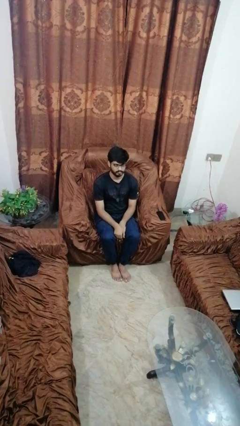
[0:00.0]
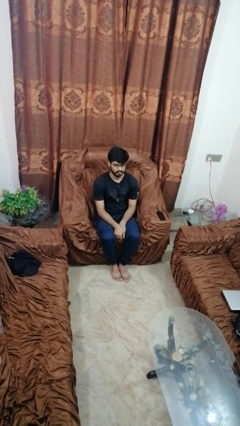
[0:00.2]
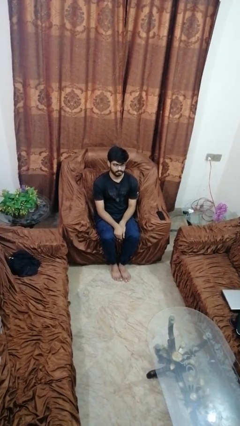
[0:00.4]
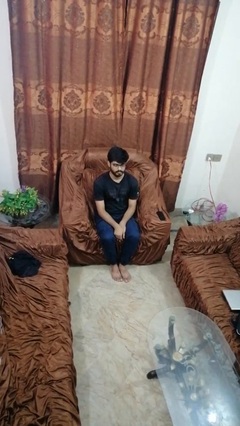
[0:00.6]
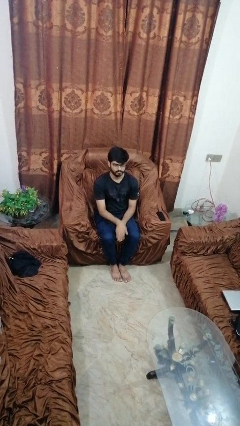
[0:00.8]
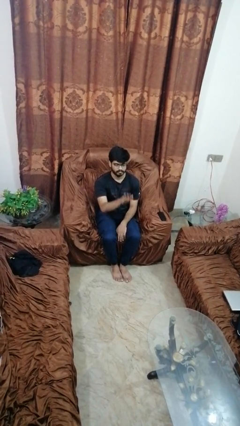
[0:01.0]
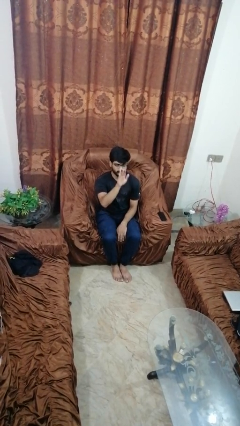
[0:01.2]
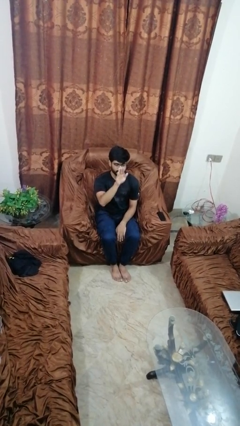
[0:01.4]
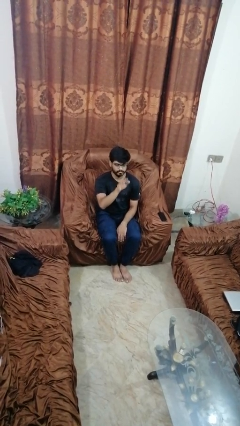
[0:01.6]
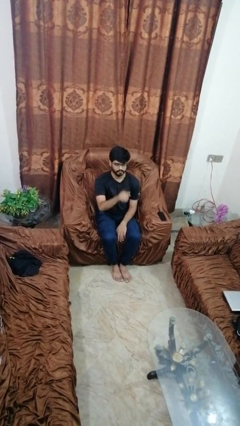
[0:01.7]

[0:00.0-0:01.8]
person gestures swipe up

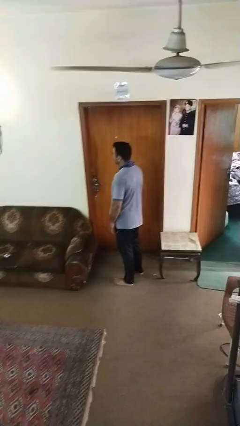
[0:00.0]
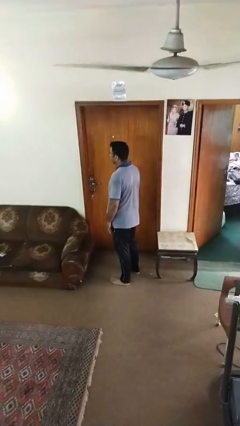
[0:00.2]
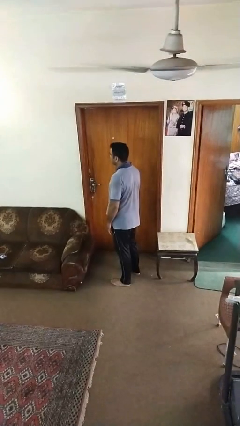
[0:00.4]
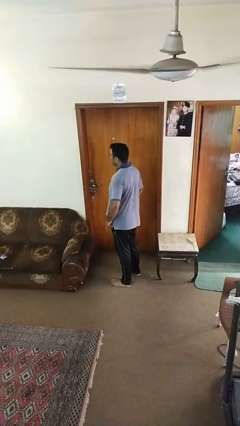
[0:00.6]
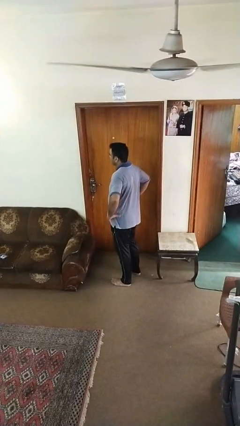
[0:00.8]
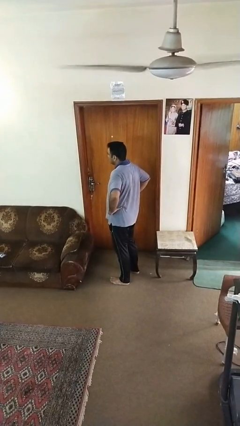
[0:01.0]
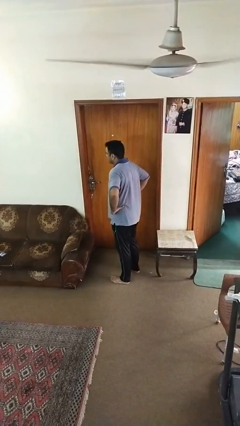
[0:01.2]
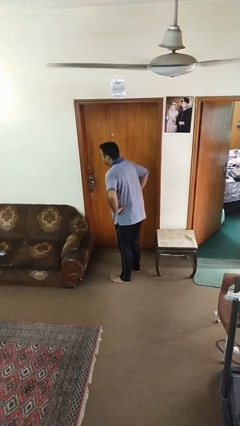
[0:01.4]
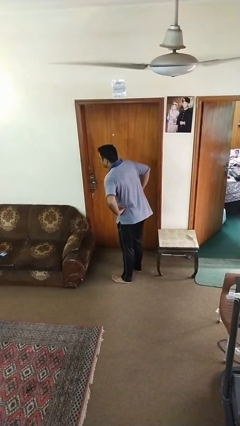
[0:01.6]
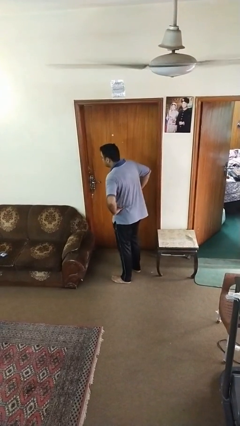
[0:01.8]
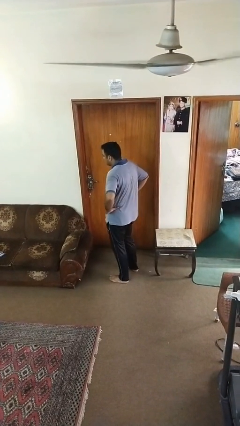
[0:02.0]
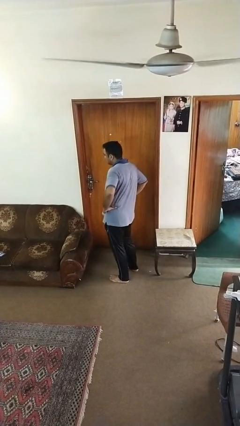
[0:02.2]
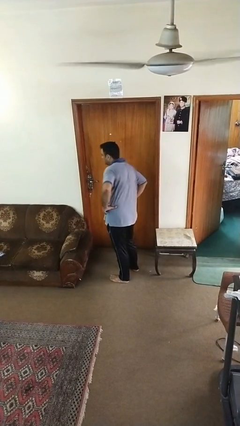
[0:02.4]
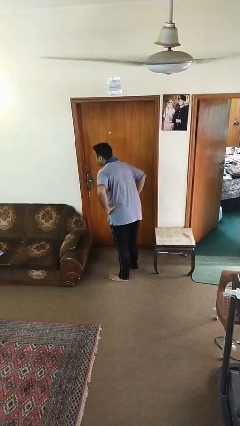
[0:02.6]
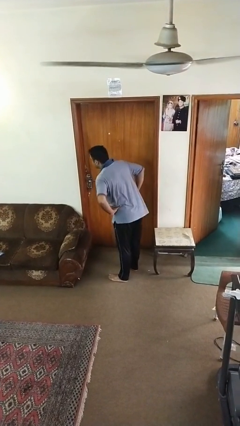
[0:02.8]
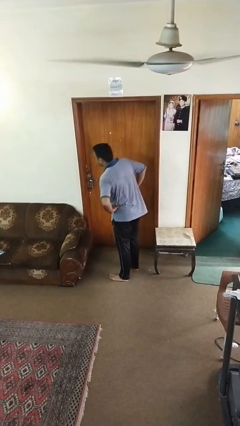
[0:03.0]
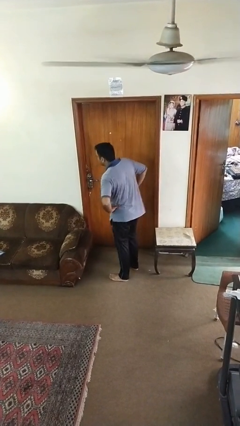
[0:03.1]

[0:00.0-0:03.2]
person wiggles hips

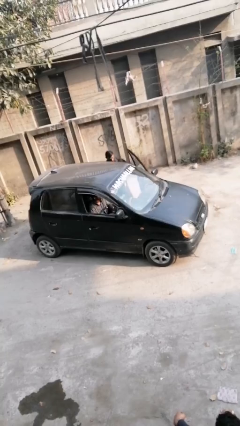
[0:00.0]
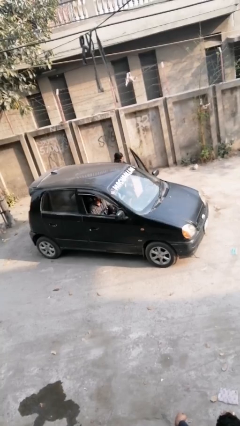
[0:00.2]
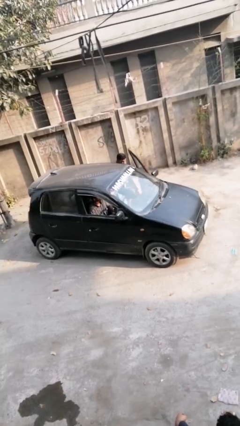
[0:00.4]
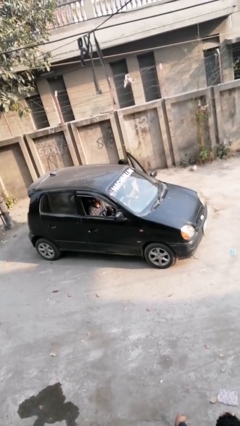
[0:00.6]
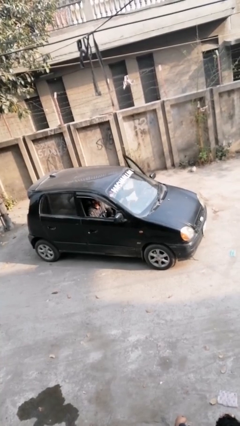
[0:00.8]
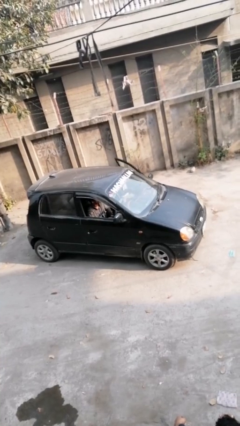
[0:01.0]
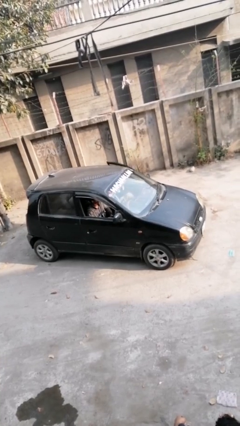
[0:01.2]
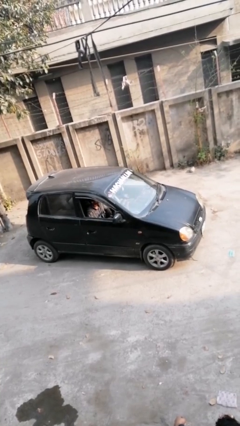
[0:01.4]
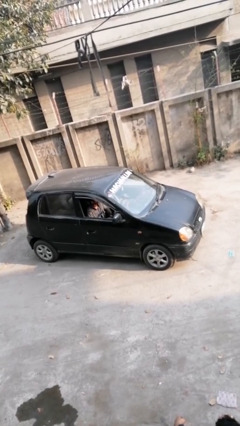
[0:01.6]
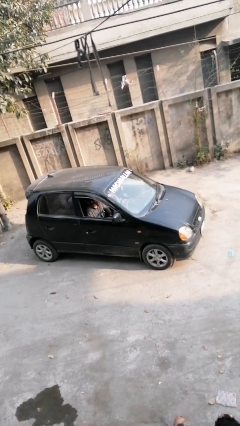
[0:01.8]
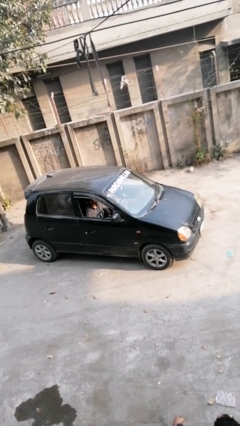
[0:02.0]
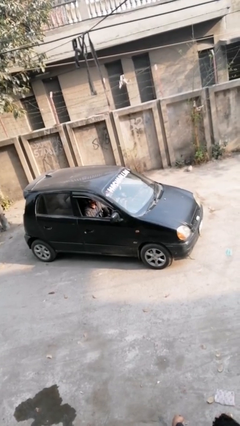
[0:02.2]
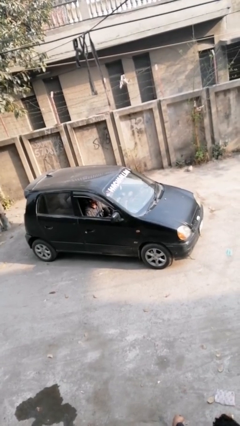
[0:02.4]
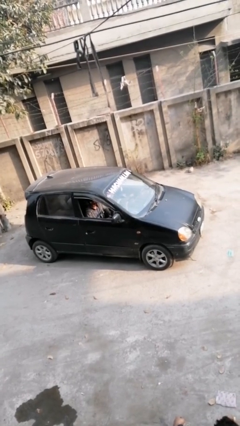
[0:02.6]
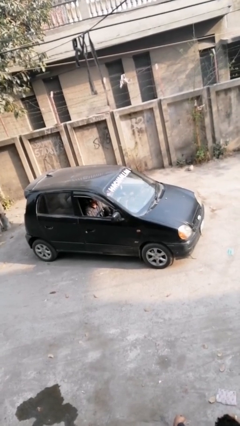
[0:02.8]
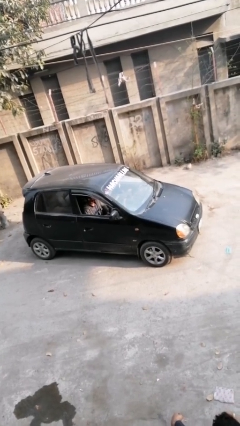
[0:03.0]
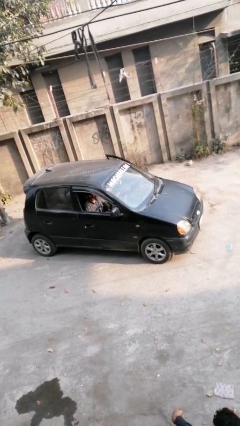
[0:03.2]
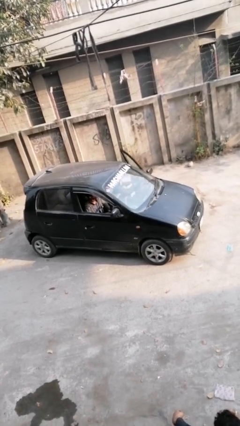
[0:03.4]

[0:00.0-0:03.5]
car picks up person

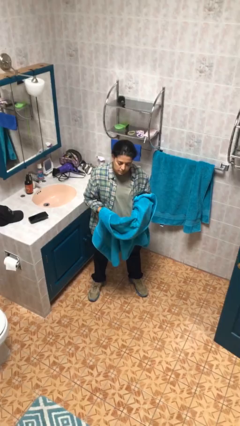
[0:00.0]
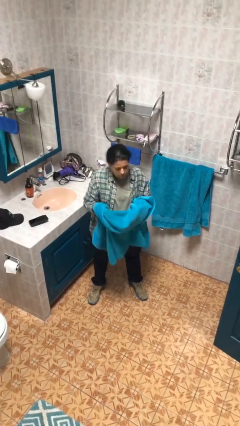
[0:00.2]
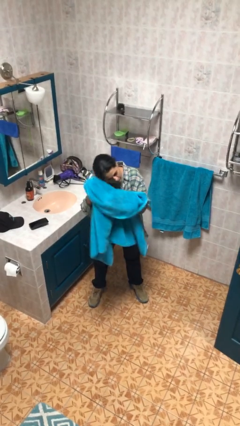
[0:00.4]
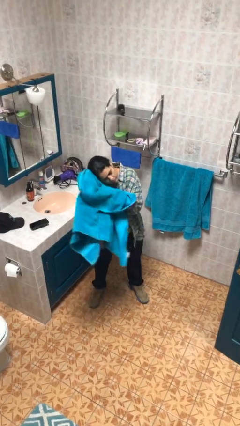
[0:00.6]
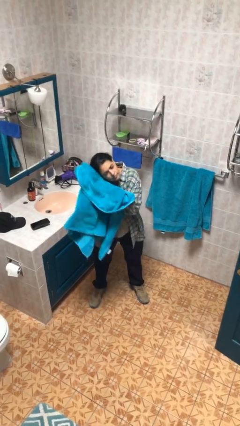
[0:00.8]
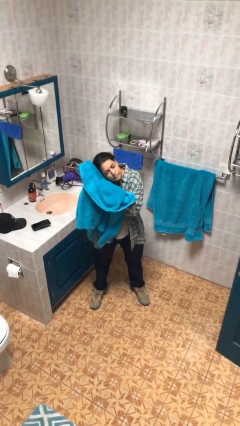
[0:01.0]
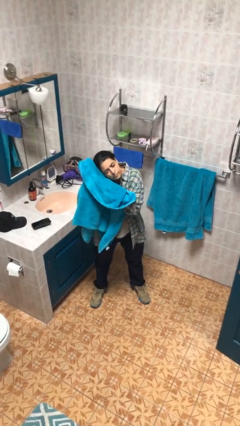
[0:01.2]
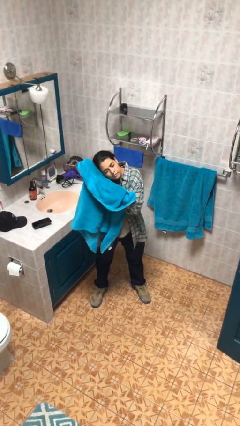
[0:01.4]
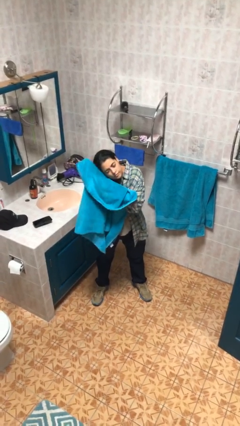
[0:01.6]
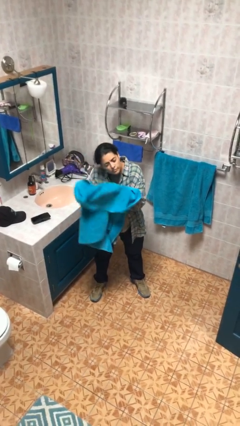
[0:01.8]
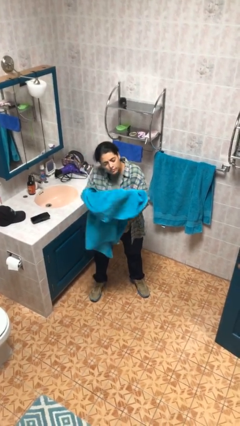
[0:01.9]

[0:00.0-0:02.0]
person dries hair with towel

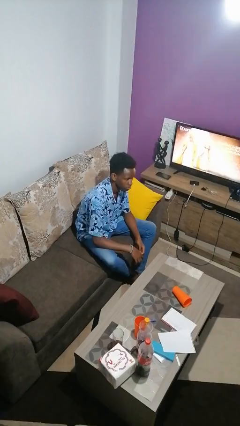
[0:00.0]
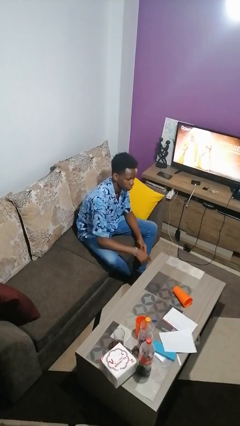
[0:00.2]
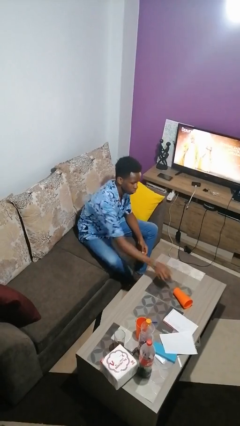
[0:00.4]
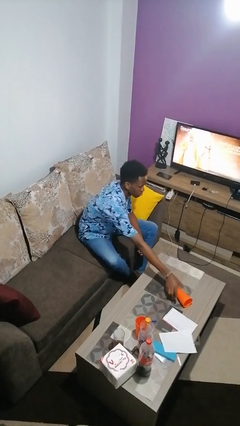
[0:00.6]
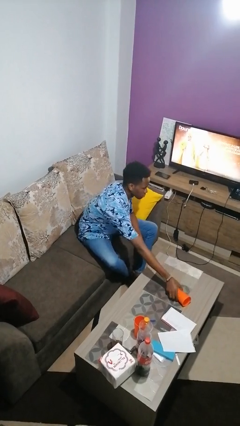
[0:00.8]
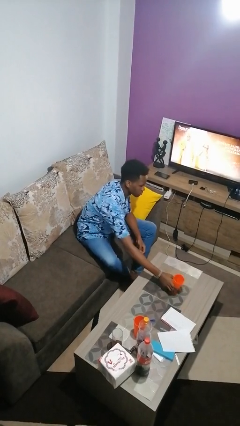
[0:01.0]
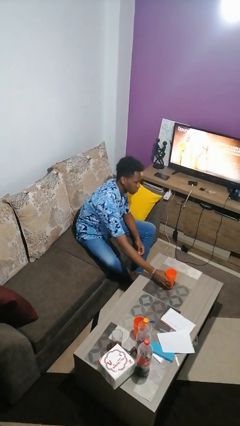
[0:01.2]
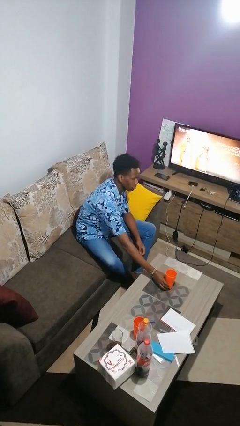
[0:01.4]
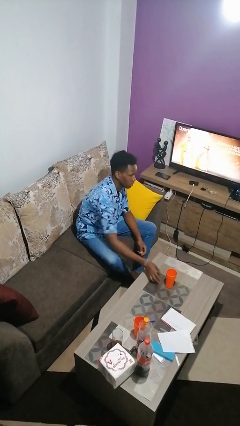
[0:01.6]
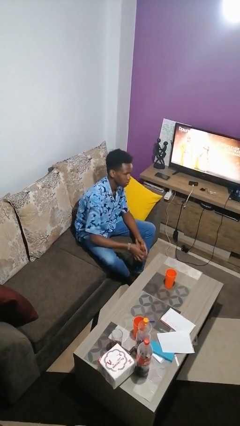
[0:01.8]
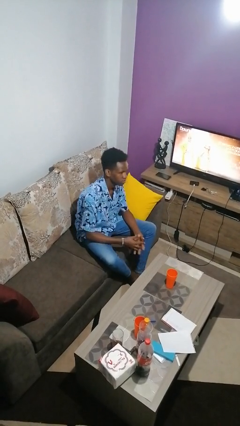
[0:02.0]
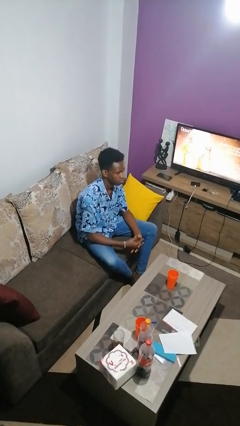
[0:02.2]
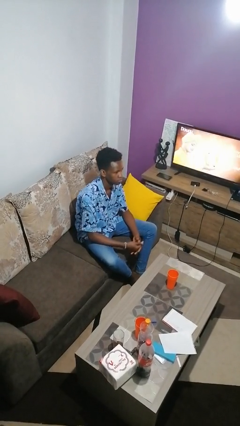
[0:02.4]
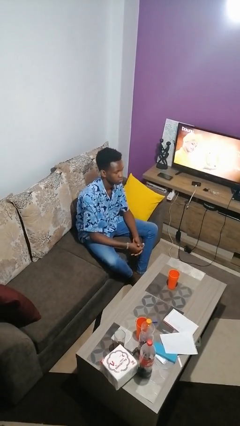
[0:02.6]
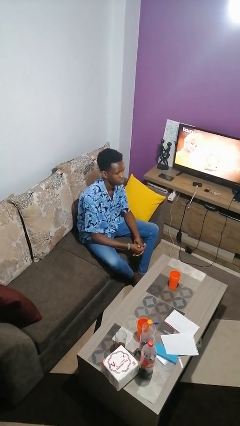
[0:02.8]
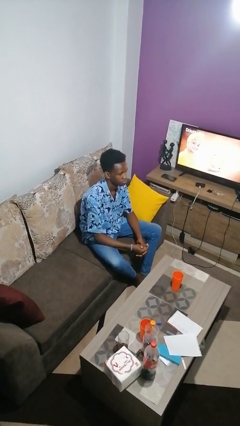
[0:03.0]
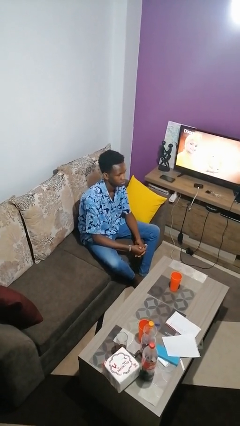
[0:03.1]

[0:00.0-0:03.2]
person sets upright glass

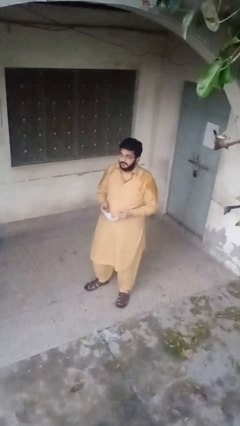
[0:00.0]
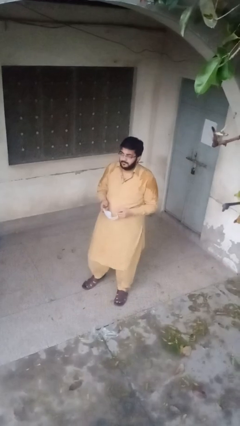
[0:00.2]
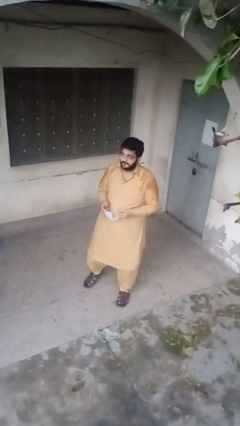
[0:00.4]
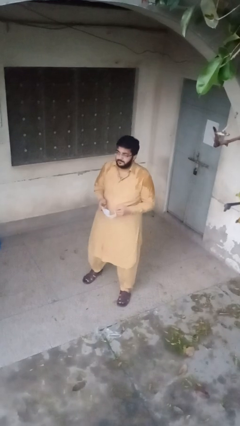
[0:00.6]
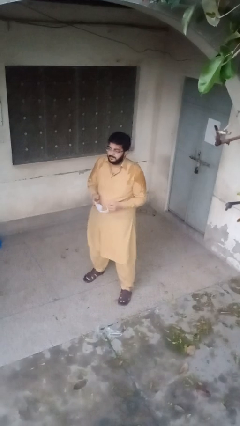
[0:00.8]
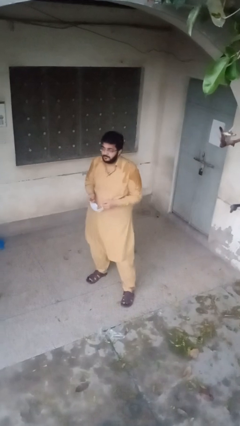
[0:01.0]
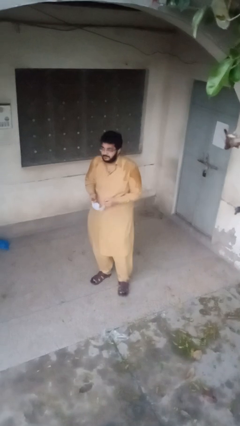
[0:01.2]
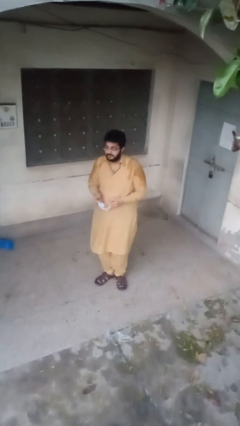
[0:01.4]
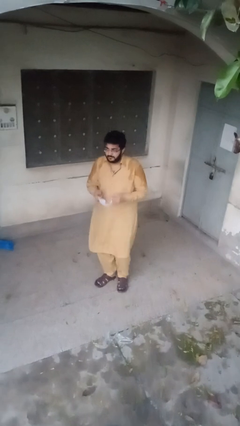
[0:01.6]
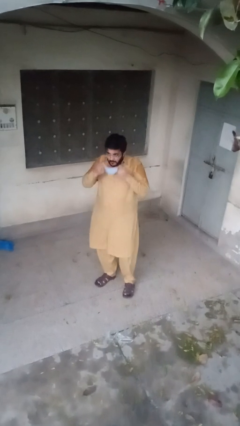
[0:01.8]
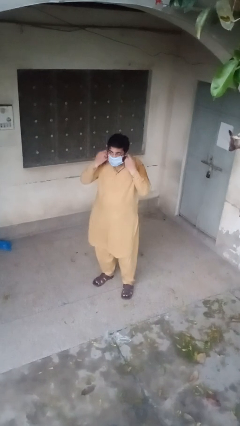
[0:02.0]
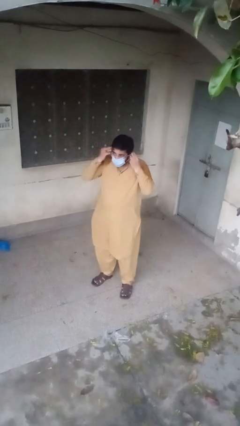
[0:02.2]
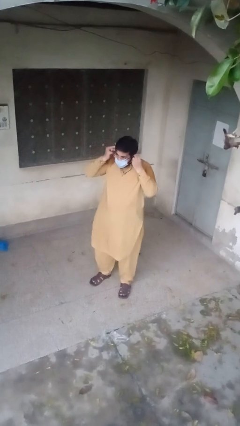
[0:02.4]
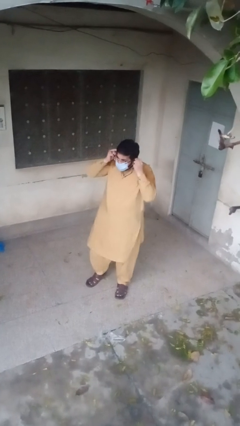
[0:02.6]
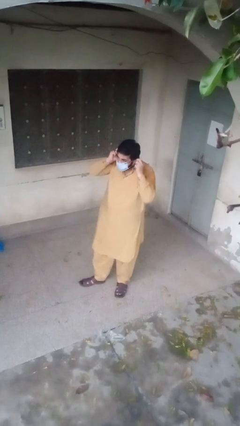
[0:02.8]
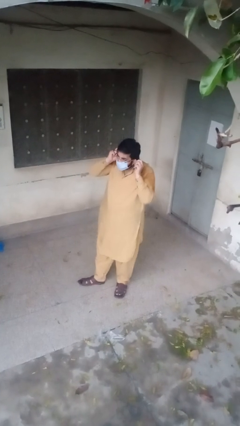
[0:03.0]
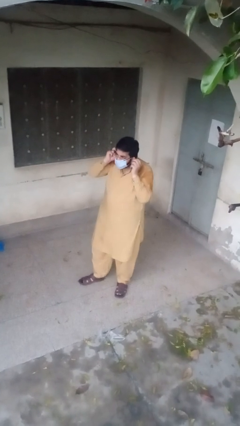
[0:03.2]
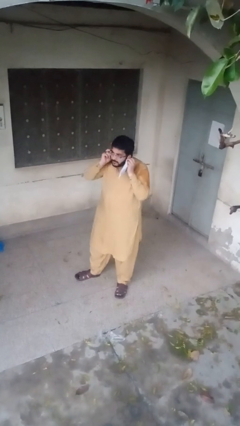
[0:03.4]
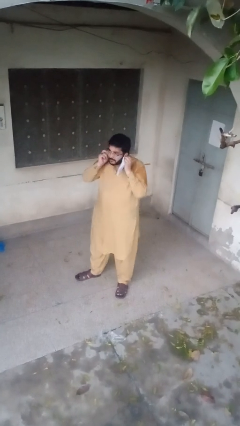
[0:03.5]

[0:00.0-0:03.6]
person puts on facemask
